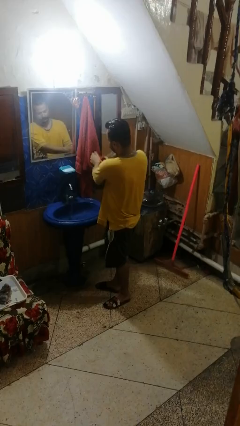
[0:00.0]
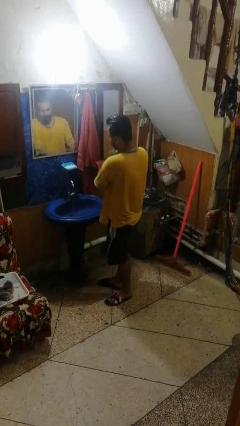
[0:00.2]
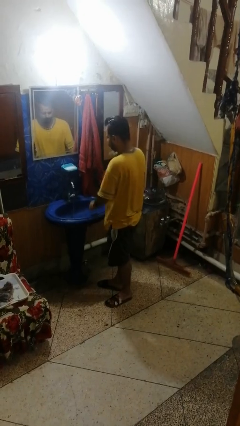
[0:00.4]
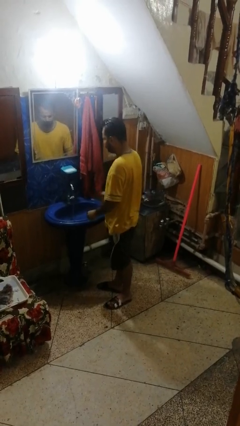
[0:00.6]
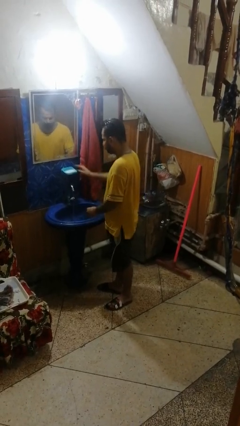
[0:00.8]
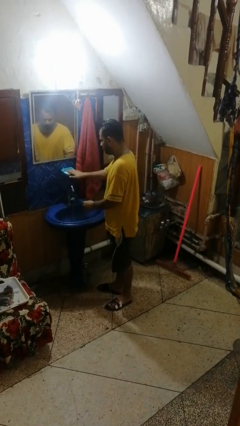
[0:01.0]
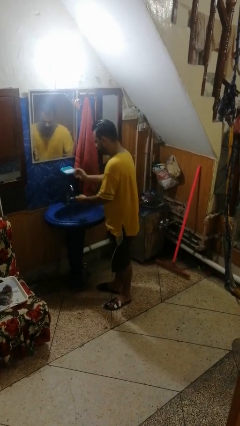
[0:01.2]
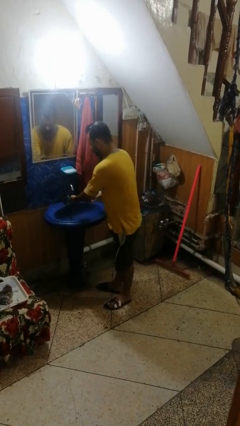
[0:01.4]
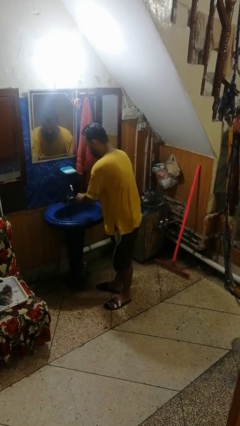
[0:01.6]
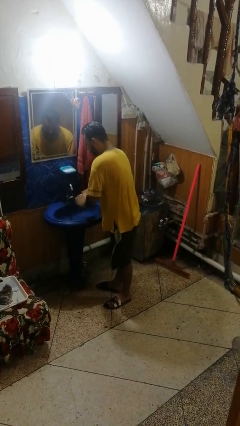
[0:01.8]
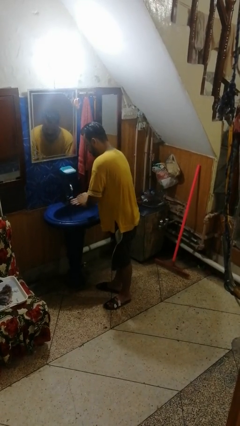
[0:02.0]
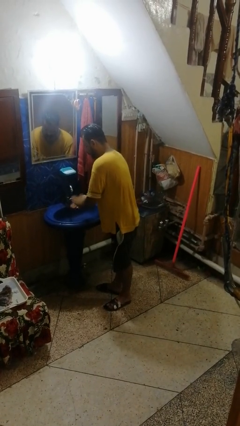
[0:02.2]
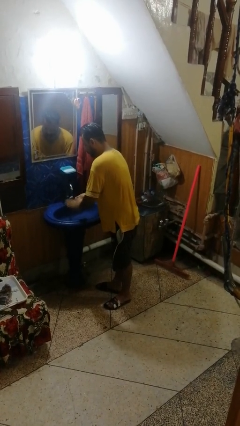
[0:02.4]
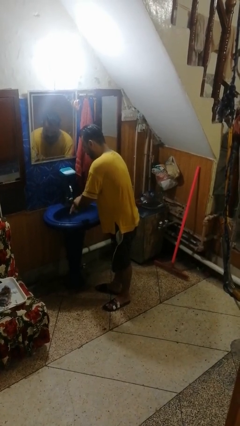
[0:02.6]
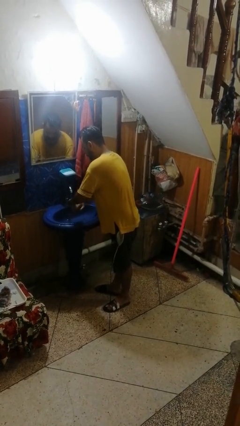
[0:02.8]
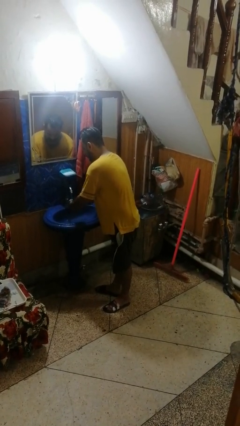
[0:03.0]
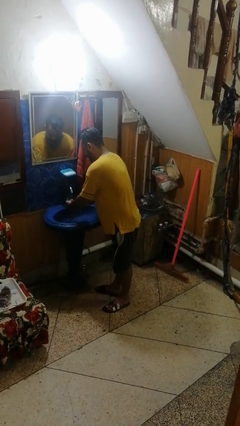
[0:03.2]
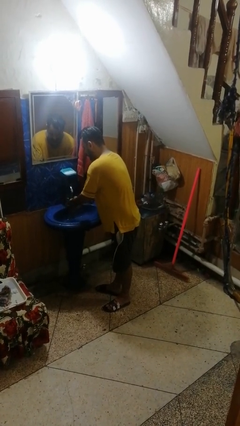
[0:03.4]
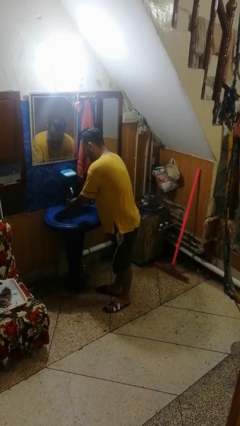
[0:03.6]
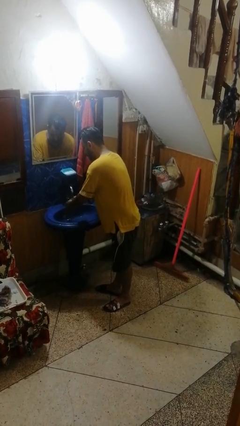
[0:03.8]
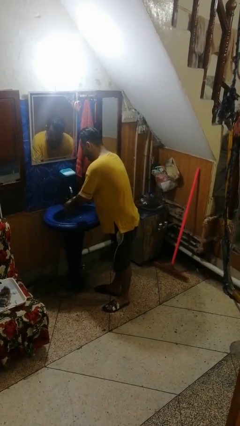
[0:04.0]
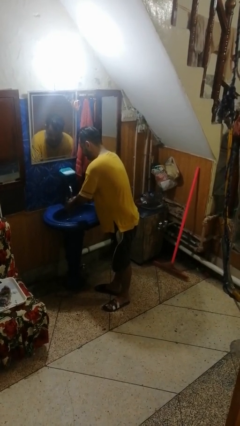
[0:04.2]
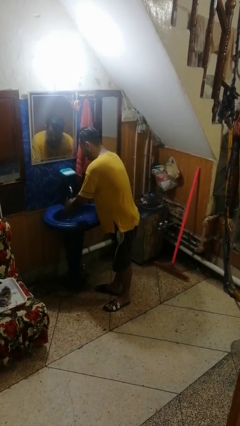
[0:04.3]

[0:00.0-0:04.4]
person washes hands

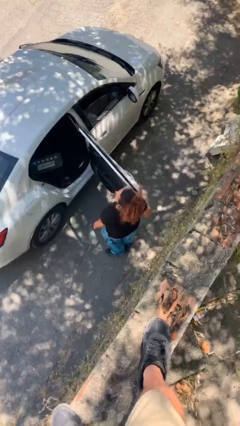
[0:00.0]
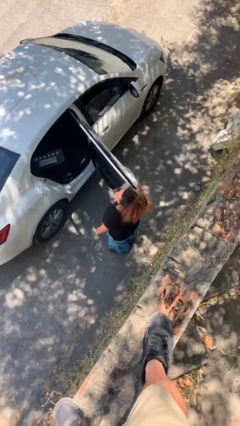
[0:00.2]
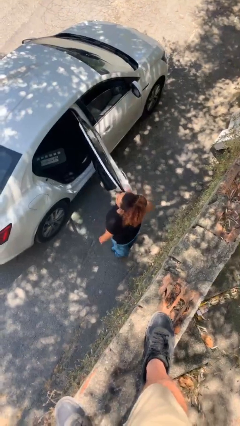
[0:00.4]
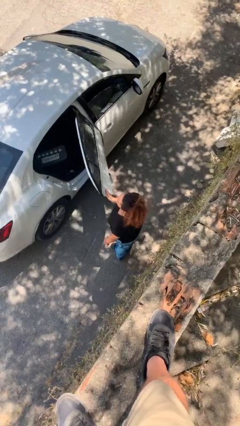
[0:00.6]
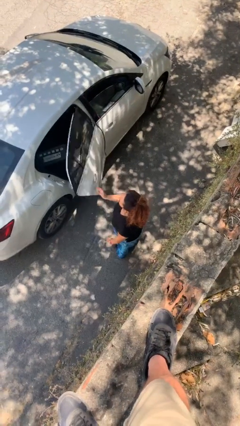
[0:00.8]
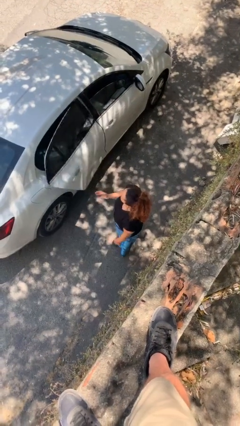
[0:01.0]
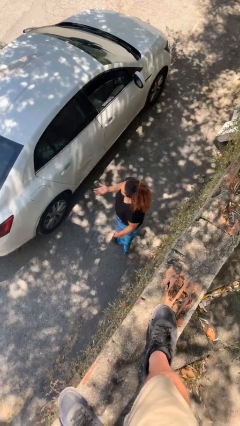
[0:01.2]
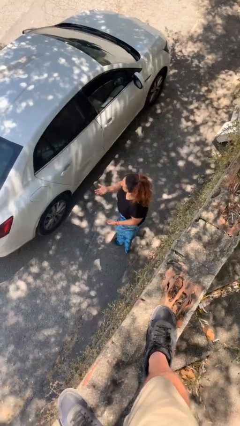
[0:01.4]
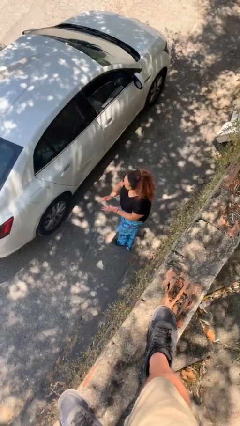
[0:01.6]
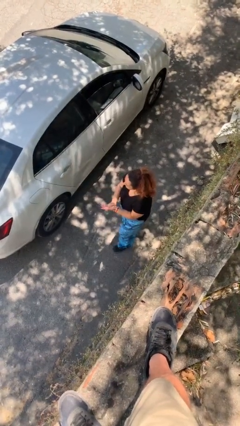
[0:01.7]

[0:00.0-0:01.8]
person closes car door

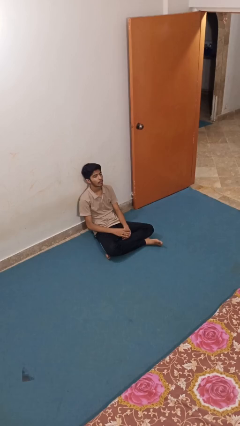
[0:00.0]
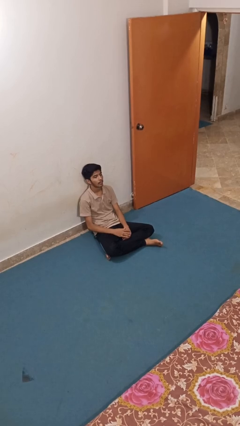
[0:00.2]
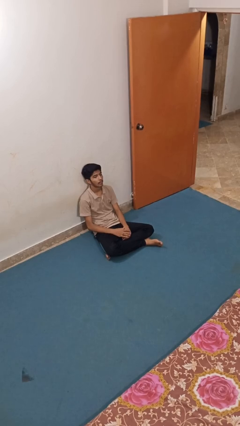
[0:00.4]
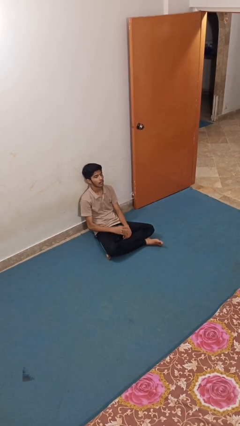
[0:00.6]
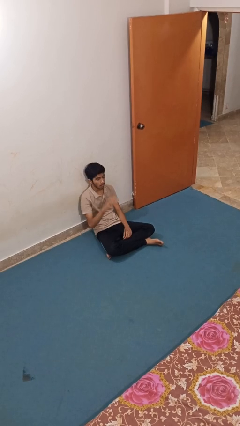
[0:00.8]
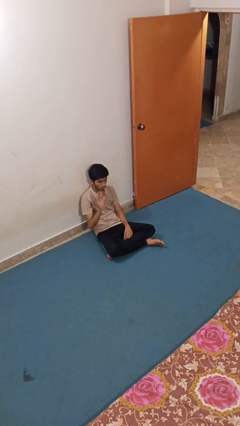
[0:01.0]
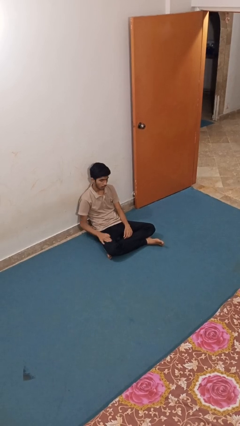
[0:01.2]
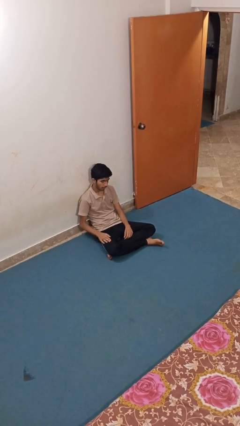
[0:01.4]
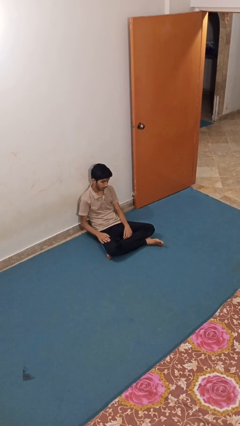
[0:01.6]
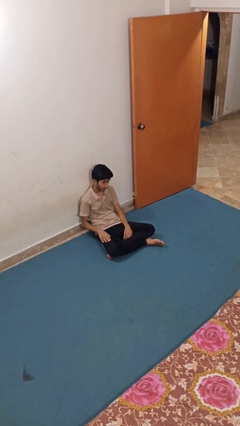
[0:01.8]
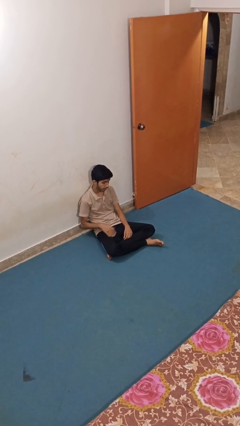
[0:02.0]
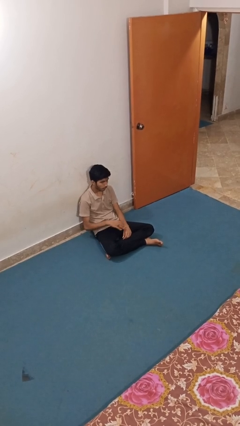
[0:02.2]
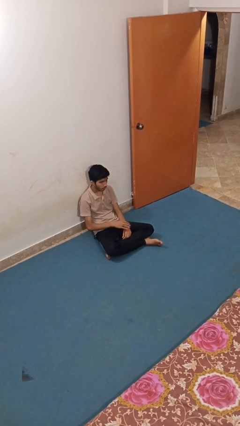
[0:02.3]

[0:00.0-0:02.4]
person slaps hands on thighs

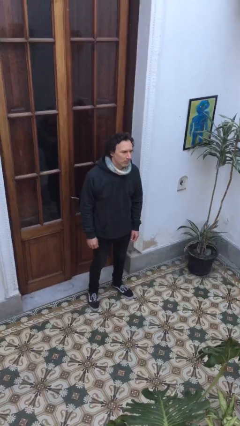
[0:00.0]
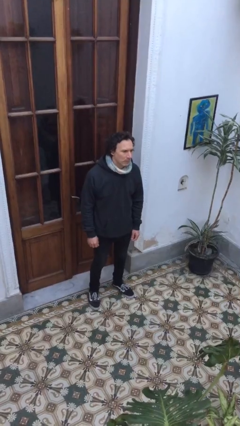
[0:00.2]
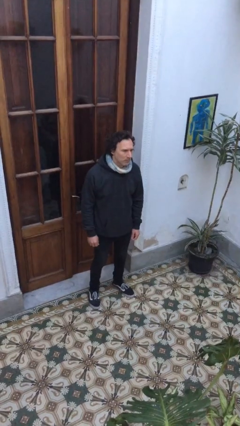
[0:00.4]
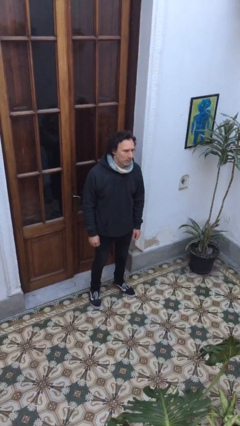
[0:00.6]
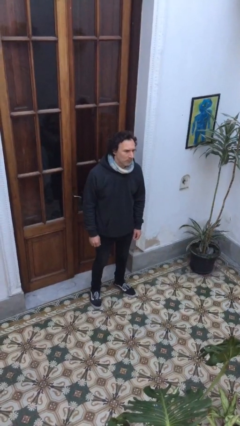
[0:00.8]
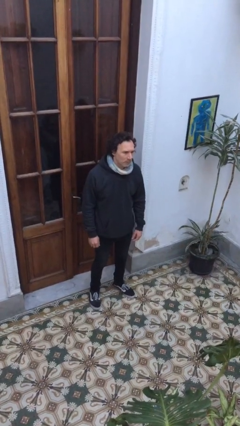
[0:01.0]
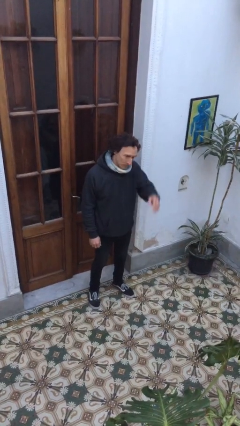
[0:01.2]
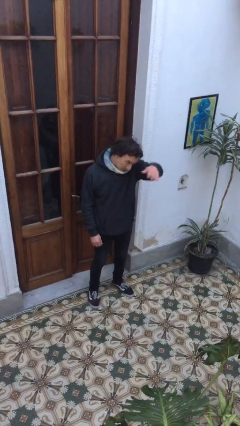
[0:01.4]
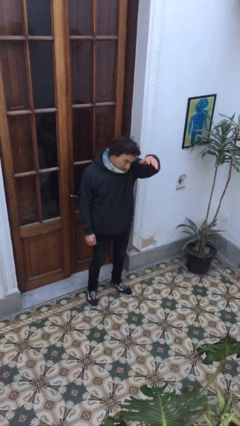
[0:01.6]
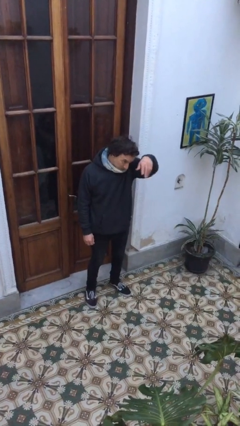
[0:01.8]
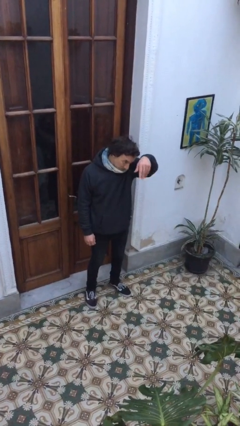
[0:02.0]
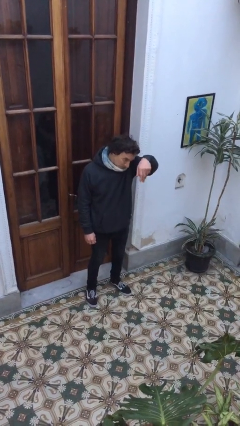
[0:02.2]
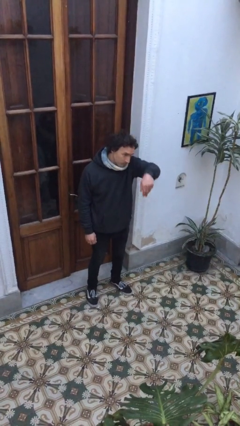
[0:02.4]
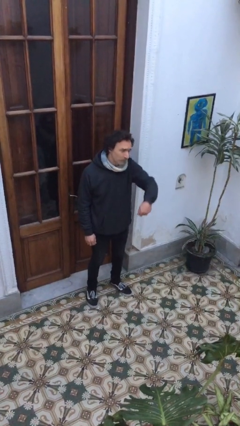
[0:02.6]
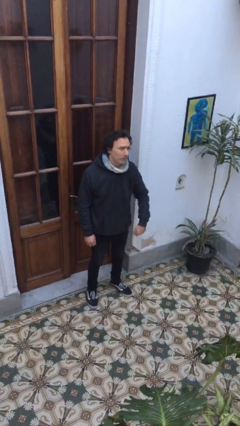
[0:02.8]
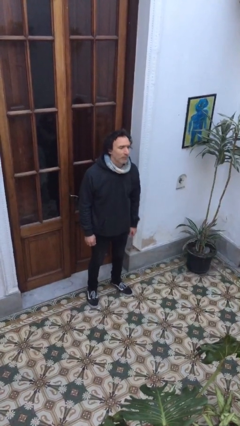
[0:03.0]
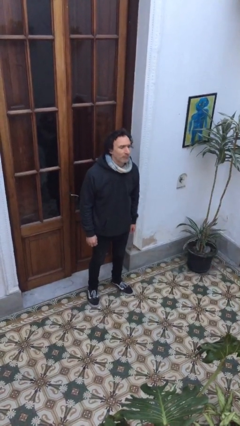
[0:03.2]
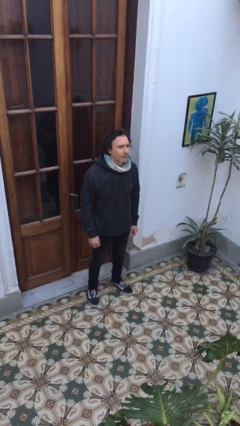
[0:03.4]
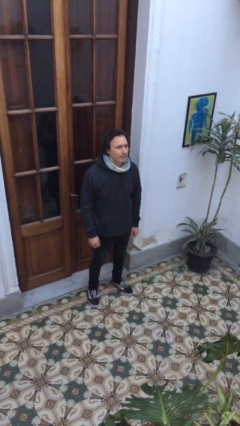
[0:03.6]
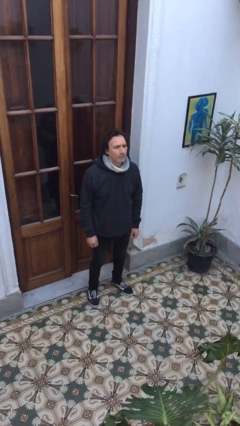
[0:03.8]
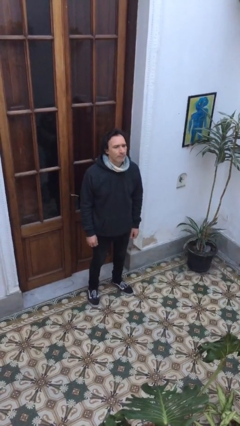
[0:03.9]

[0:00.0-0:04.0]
person gestures come here

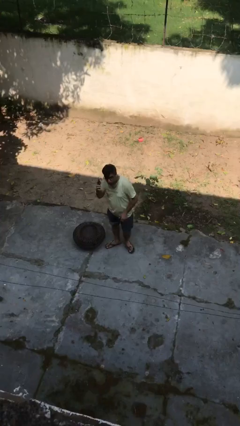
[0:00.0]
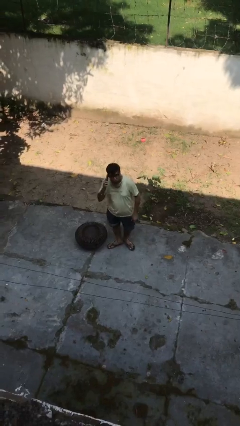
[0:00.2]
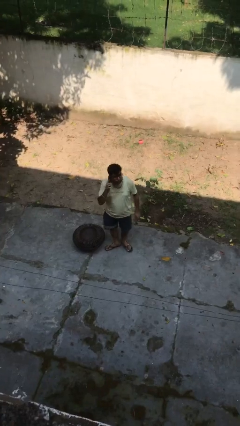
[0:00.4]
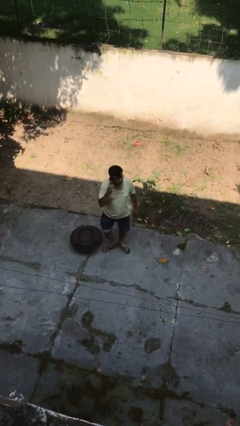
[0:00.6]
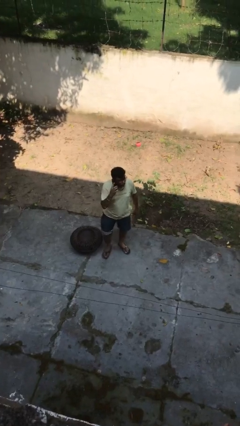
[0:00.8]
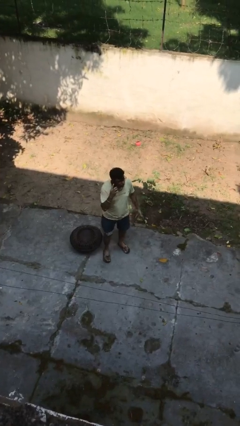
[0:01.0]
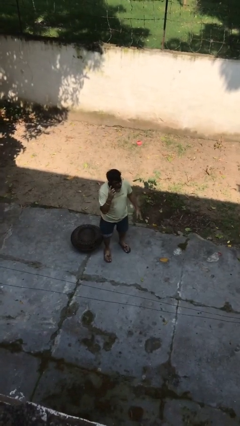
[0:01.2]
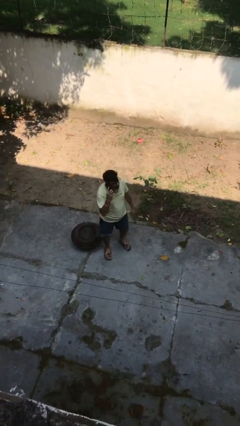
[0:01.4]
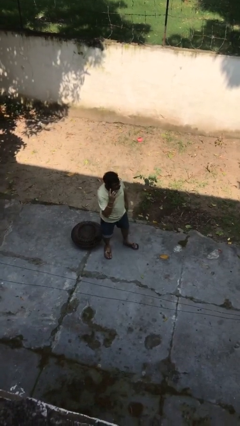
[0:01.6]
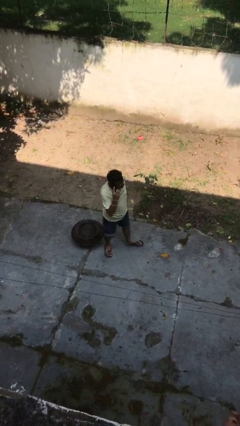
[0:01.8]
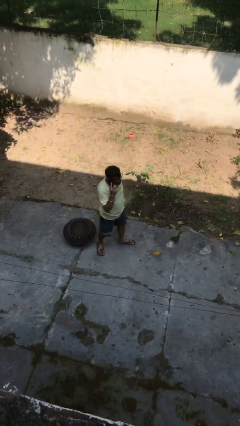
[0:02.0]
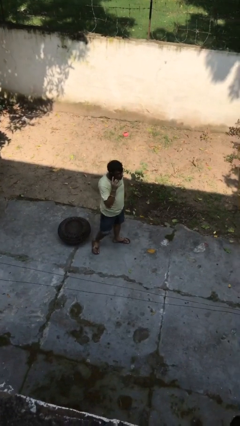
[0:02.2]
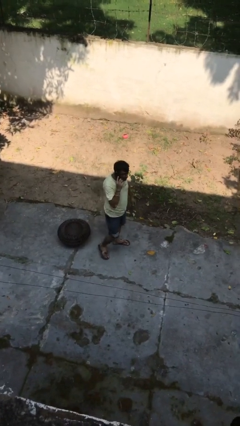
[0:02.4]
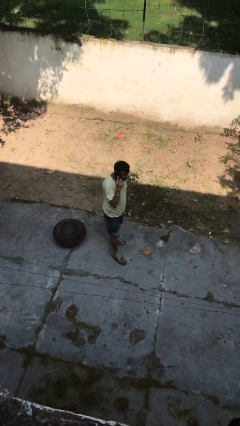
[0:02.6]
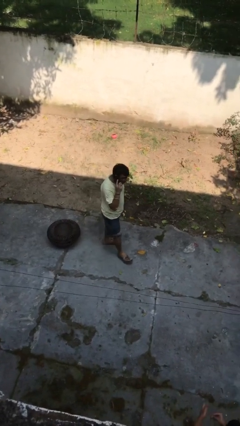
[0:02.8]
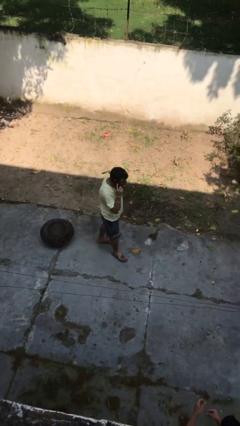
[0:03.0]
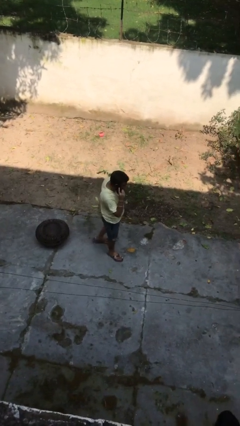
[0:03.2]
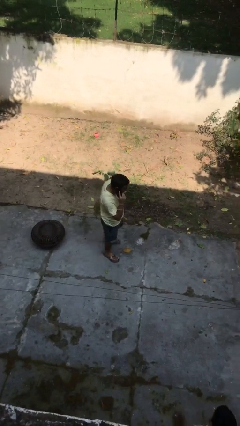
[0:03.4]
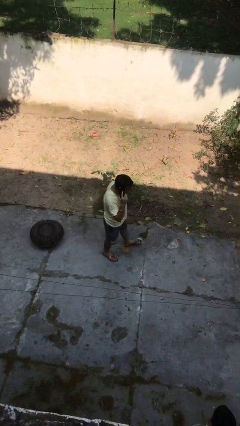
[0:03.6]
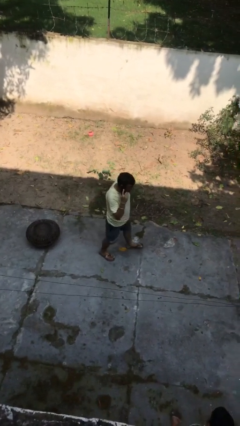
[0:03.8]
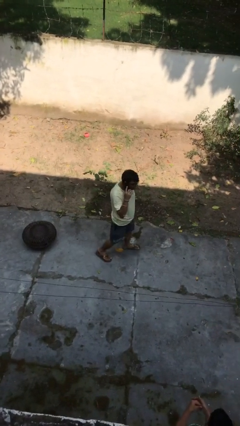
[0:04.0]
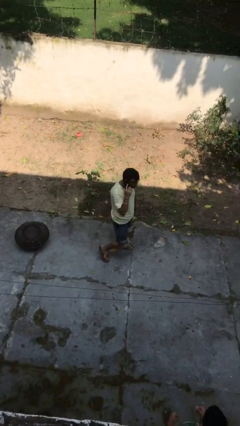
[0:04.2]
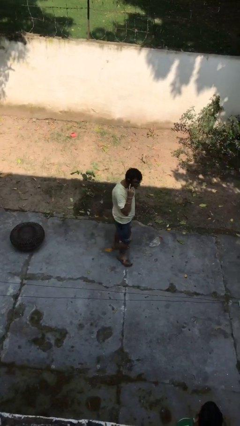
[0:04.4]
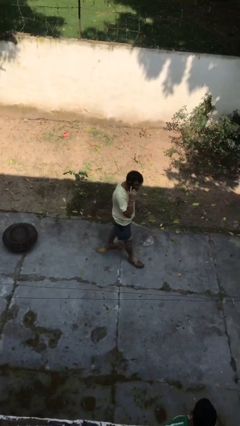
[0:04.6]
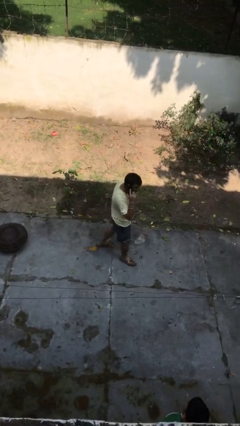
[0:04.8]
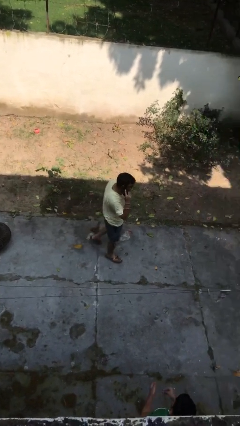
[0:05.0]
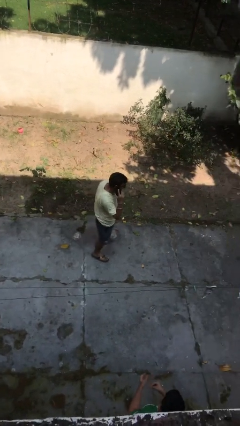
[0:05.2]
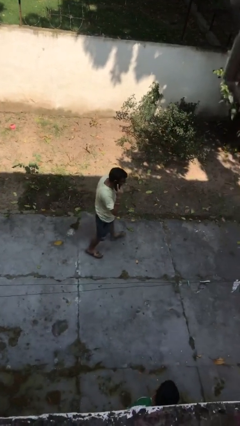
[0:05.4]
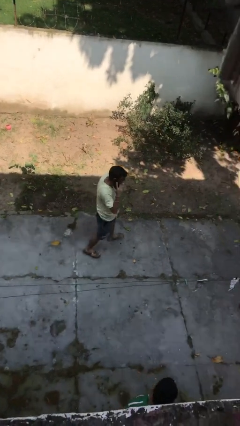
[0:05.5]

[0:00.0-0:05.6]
person talks on phone
